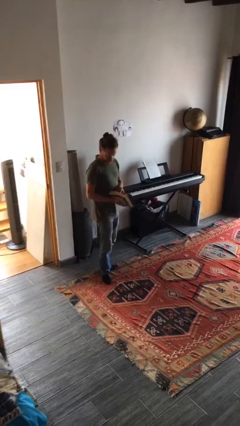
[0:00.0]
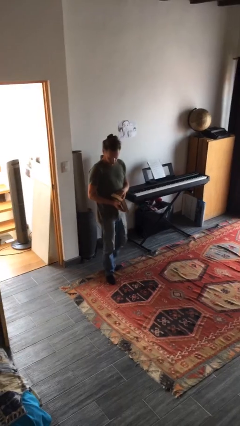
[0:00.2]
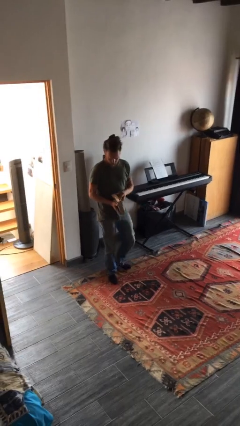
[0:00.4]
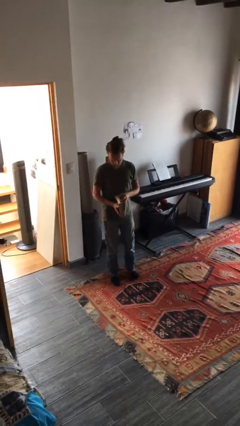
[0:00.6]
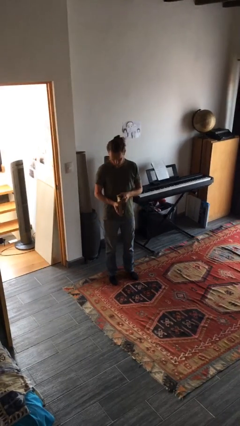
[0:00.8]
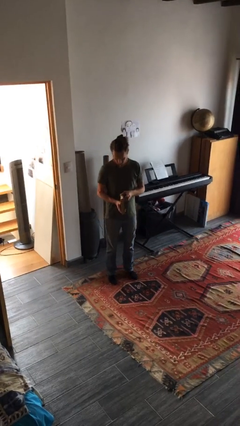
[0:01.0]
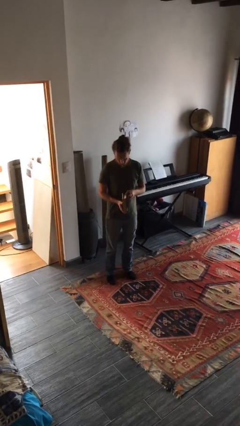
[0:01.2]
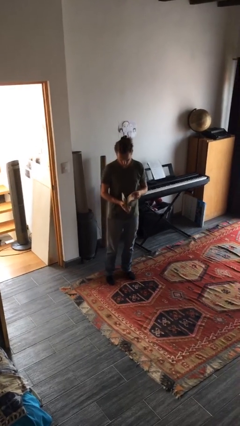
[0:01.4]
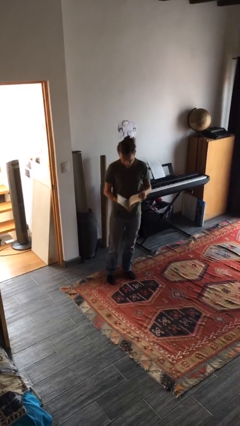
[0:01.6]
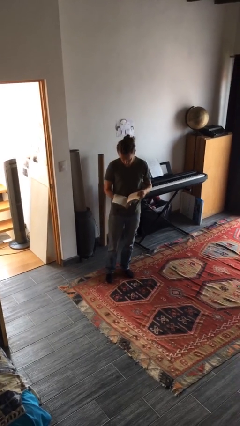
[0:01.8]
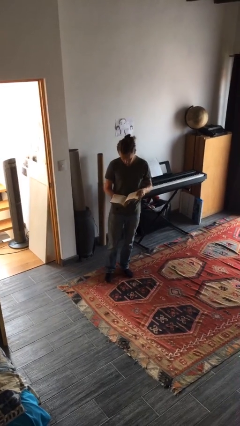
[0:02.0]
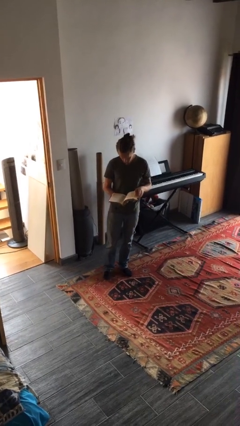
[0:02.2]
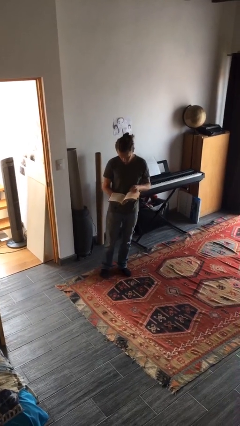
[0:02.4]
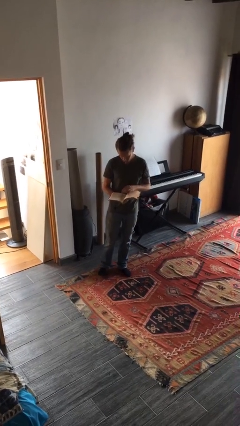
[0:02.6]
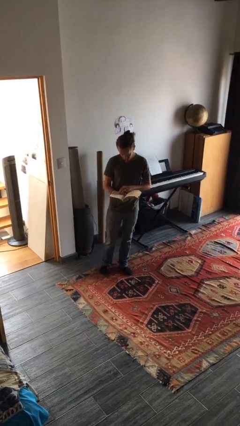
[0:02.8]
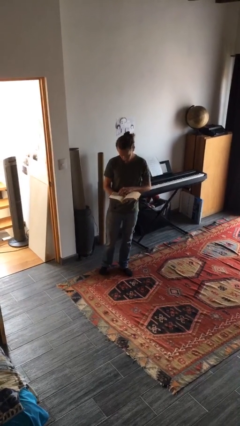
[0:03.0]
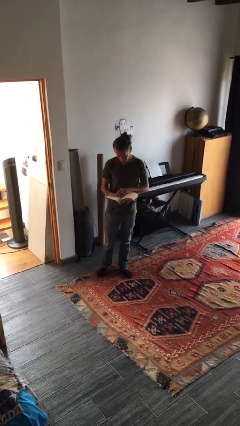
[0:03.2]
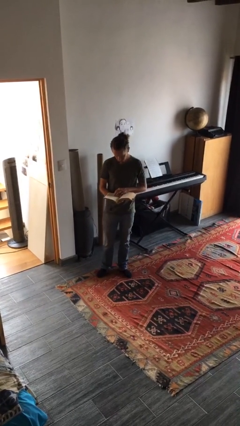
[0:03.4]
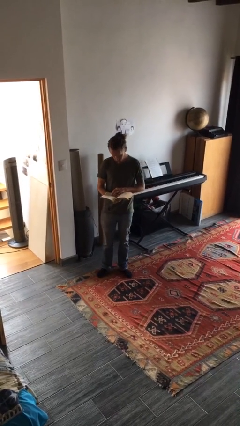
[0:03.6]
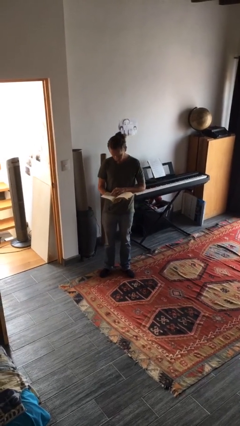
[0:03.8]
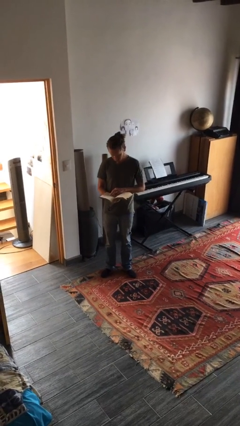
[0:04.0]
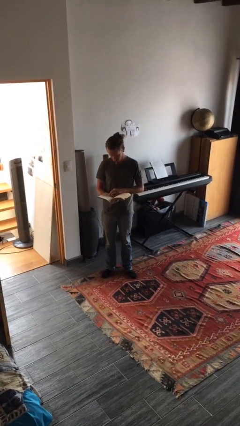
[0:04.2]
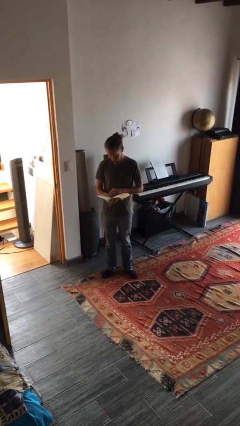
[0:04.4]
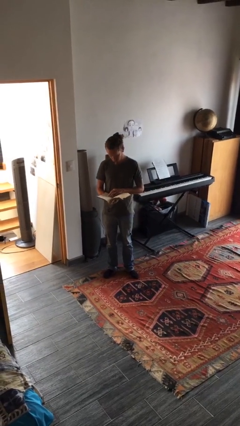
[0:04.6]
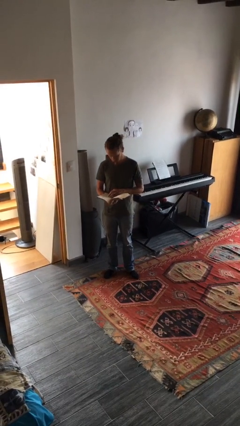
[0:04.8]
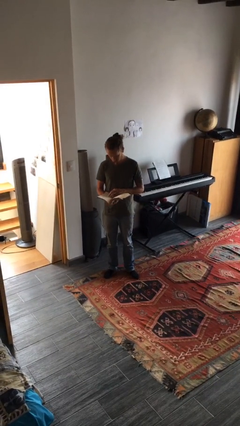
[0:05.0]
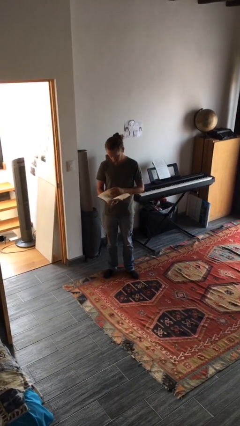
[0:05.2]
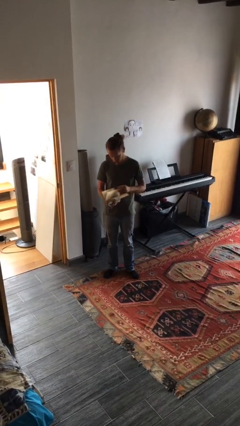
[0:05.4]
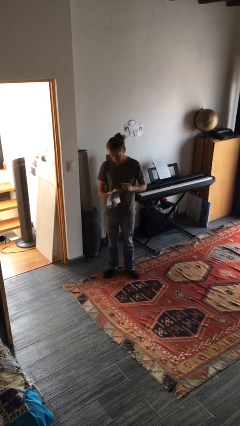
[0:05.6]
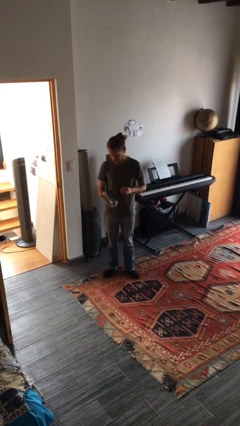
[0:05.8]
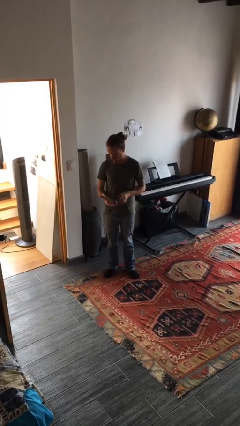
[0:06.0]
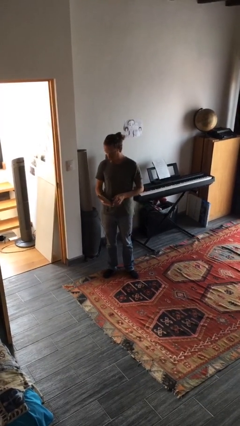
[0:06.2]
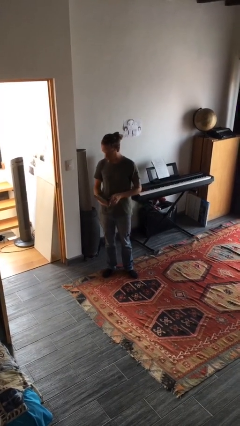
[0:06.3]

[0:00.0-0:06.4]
person reads book

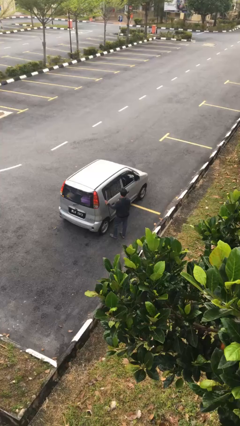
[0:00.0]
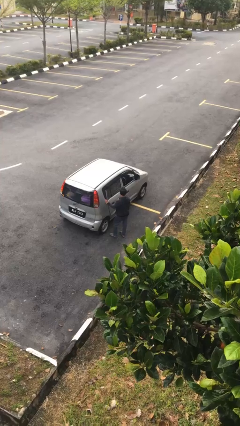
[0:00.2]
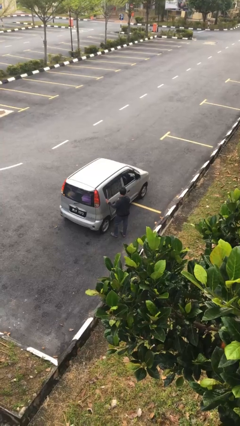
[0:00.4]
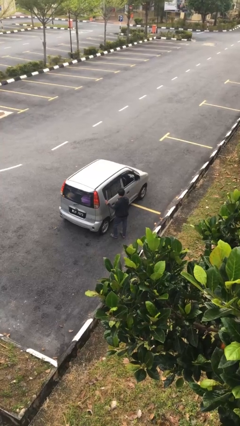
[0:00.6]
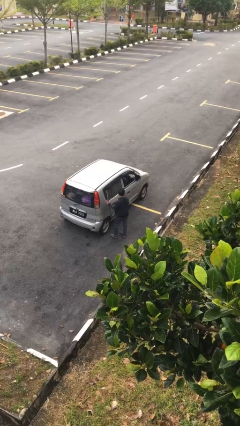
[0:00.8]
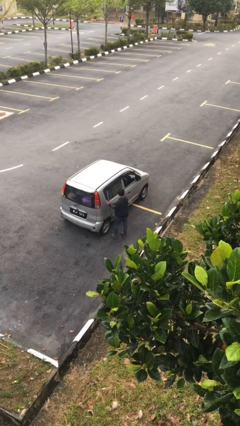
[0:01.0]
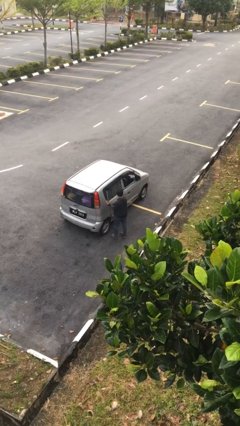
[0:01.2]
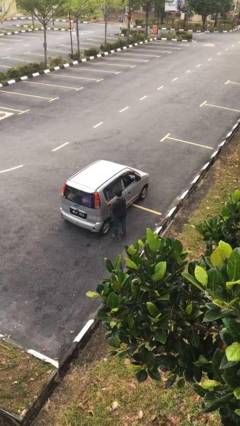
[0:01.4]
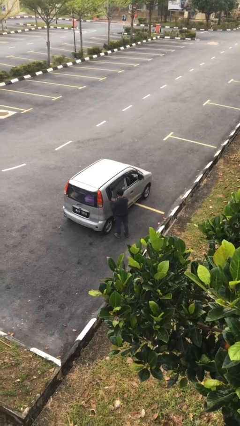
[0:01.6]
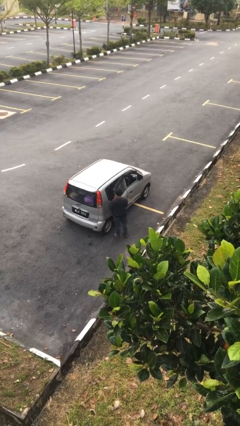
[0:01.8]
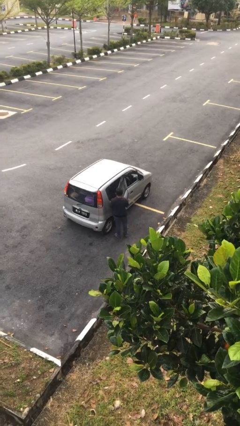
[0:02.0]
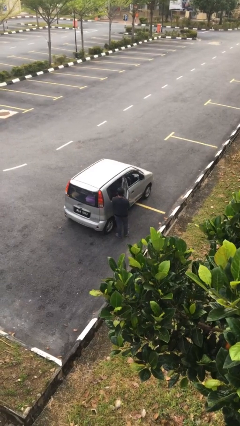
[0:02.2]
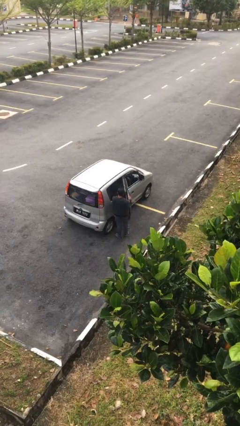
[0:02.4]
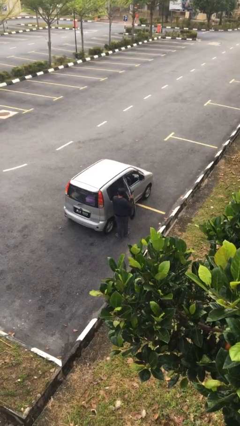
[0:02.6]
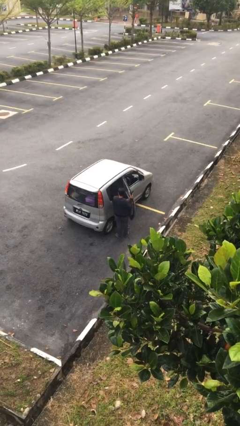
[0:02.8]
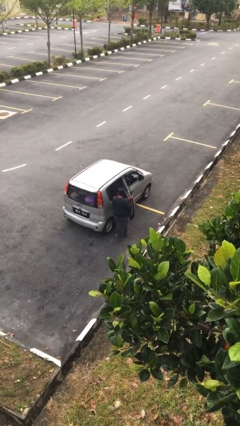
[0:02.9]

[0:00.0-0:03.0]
person opens car door

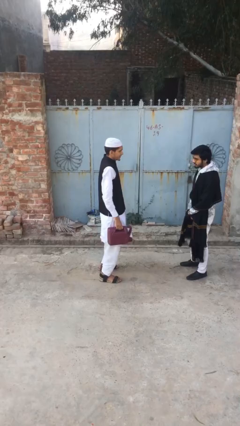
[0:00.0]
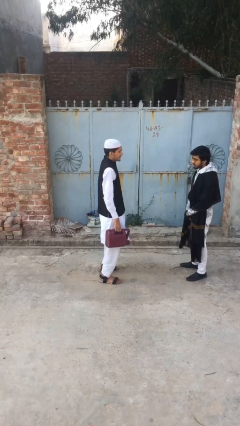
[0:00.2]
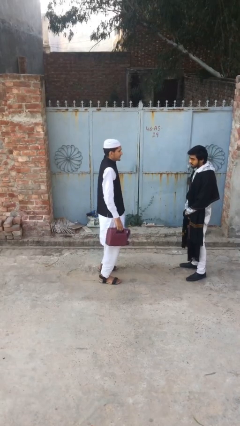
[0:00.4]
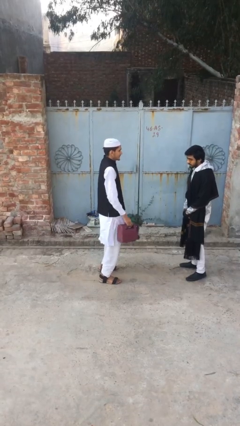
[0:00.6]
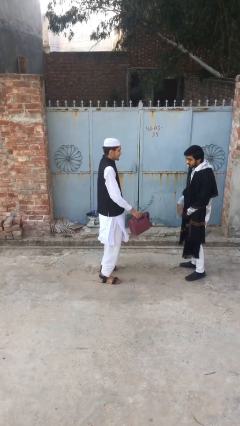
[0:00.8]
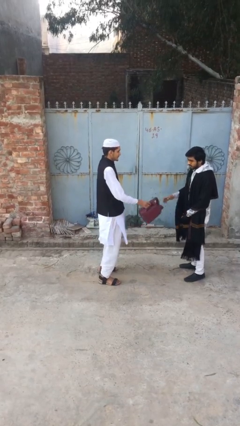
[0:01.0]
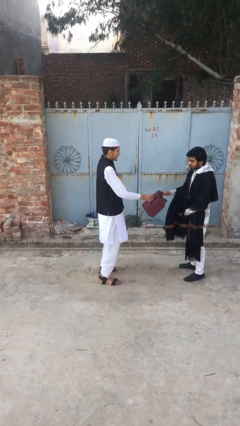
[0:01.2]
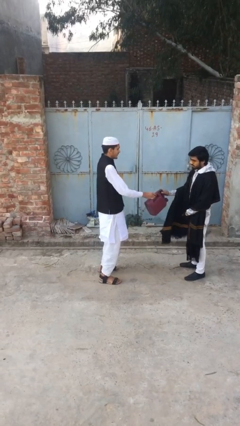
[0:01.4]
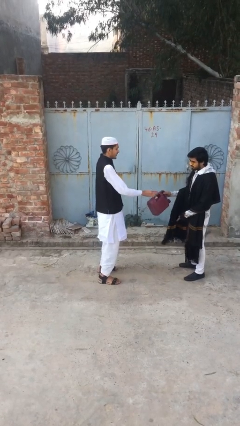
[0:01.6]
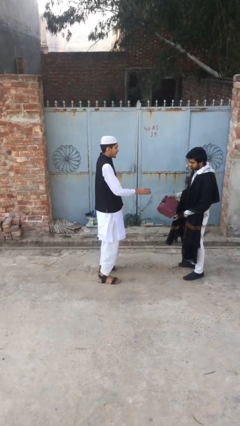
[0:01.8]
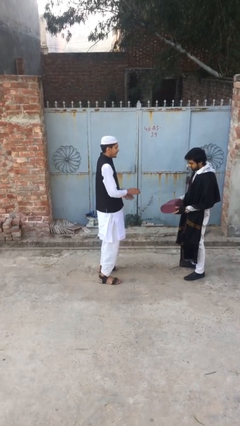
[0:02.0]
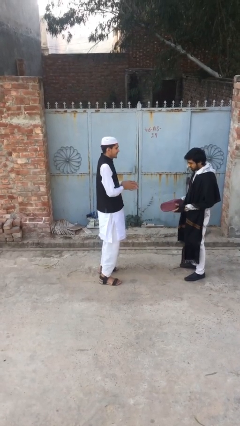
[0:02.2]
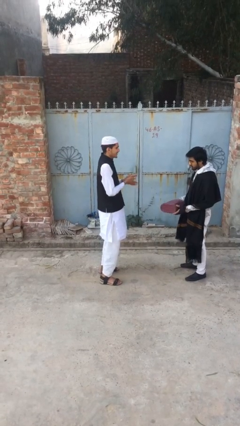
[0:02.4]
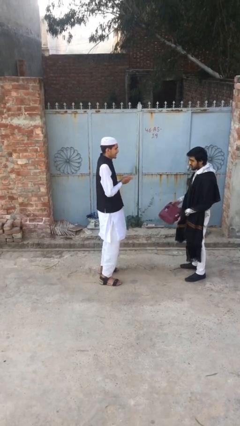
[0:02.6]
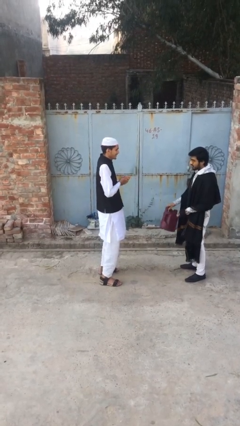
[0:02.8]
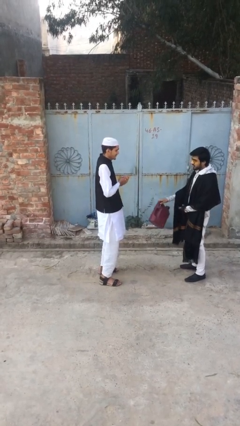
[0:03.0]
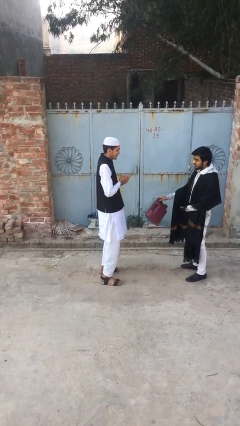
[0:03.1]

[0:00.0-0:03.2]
person transfers object to person

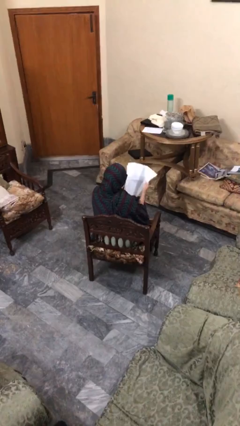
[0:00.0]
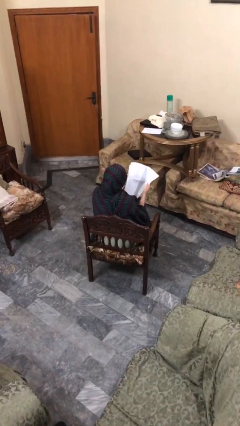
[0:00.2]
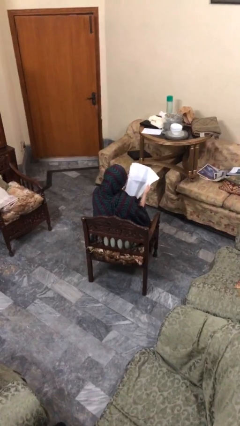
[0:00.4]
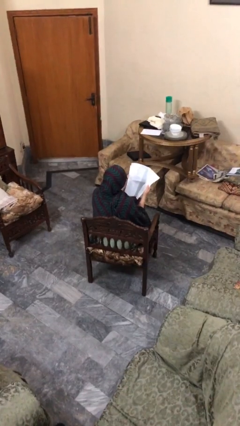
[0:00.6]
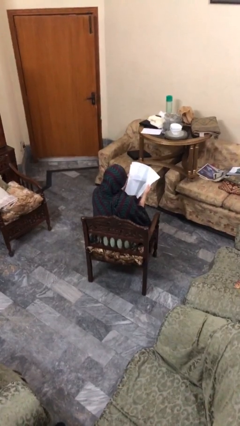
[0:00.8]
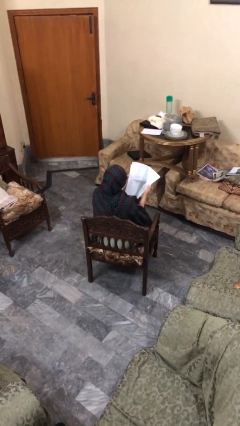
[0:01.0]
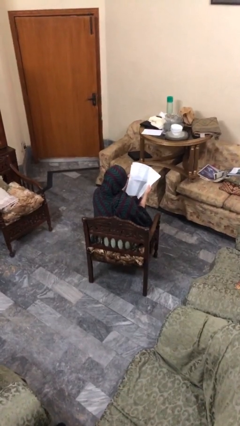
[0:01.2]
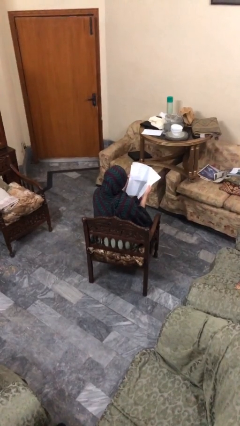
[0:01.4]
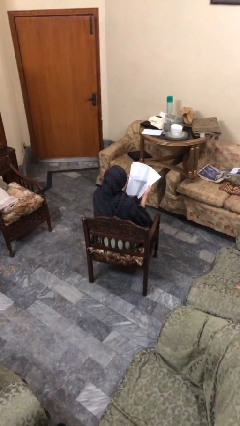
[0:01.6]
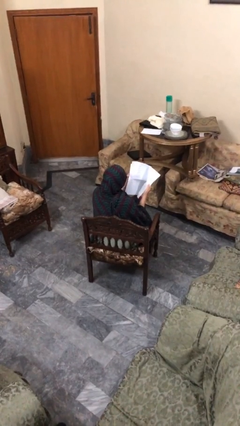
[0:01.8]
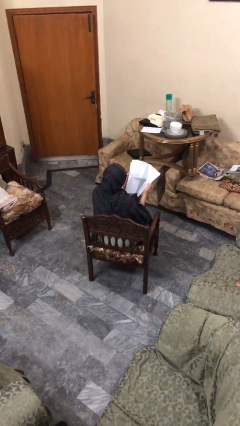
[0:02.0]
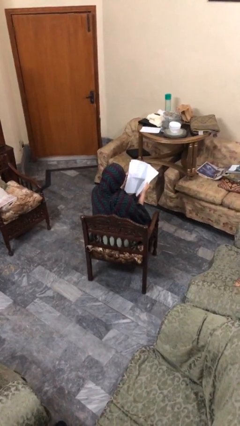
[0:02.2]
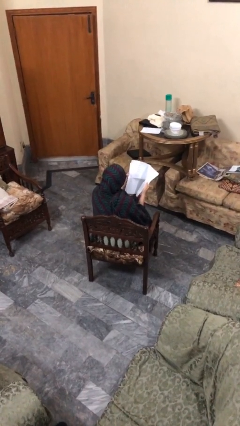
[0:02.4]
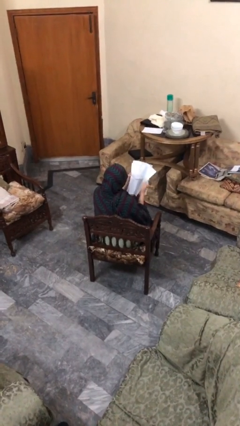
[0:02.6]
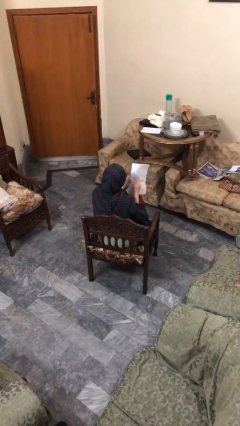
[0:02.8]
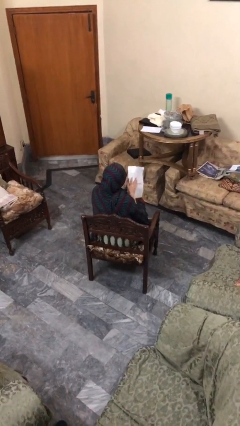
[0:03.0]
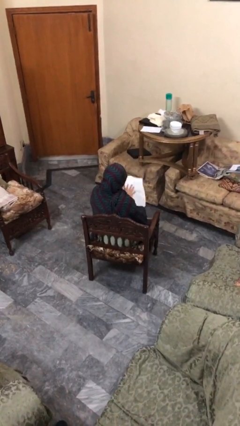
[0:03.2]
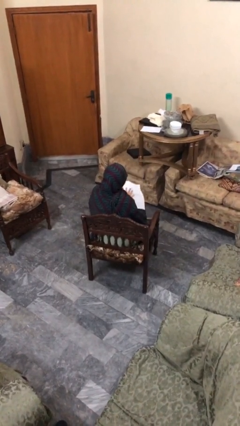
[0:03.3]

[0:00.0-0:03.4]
person reads magazine

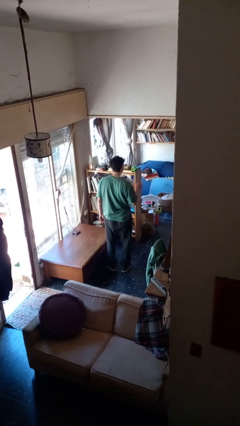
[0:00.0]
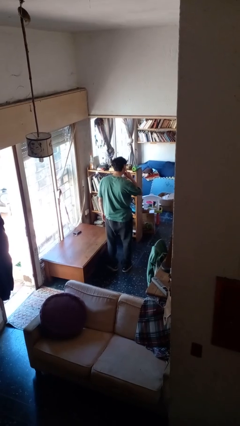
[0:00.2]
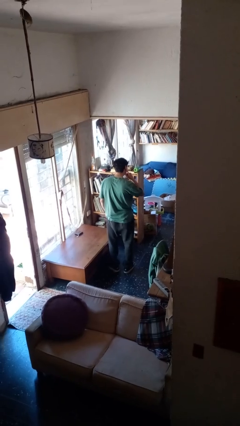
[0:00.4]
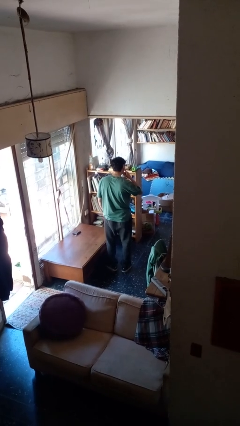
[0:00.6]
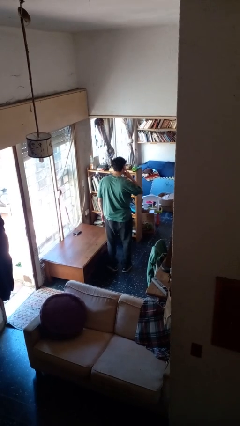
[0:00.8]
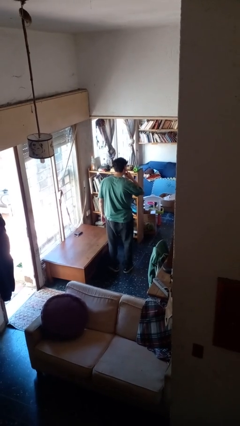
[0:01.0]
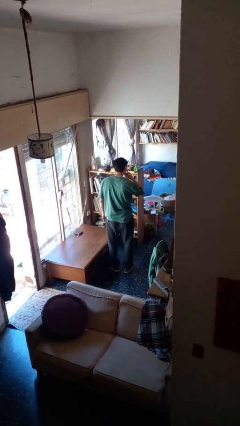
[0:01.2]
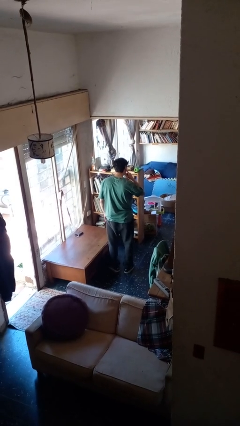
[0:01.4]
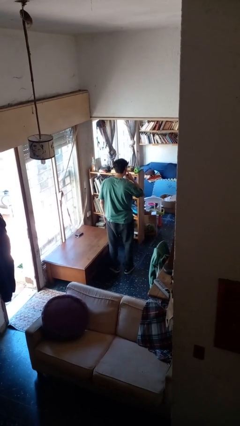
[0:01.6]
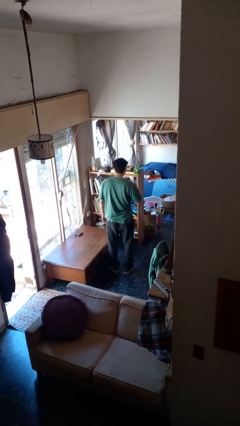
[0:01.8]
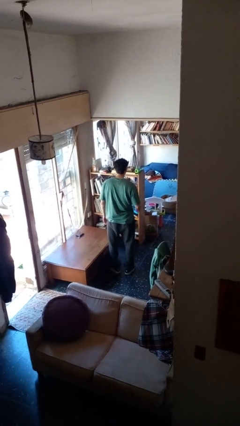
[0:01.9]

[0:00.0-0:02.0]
person gestures listen closely
